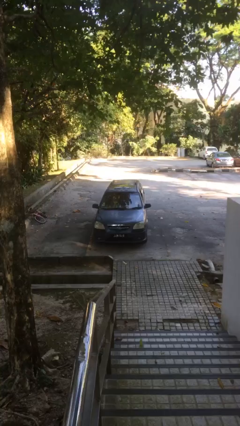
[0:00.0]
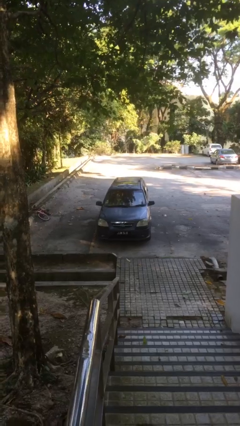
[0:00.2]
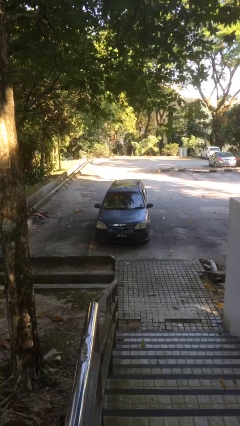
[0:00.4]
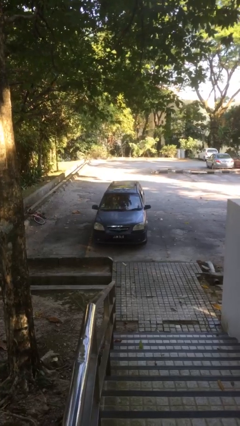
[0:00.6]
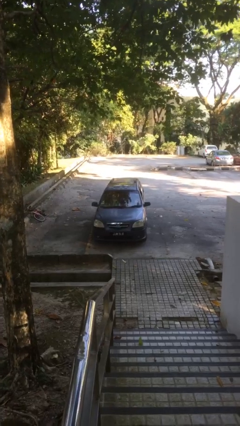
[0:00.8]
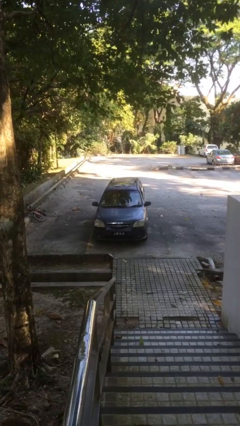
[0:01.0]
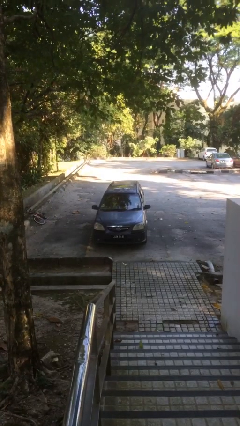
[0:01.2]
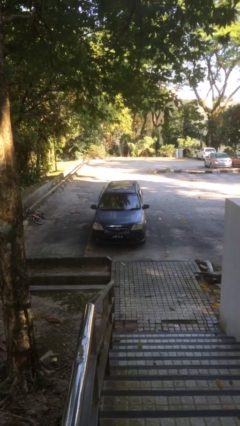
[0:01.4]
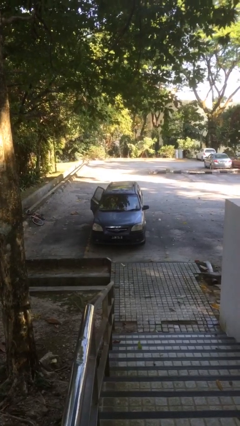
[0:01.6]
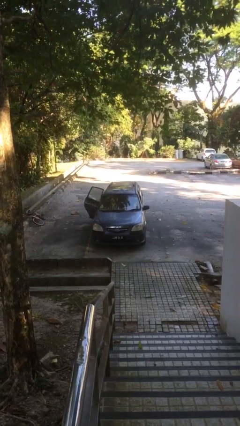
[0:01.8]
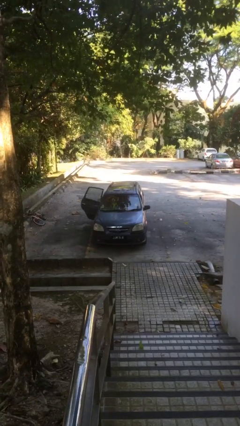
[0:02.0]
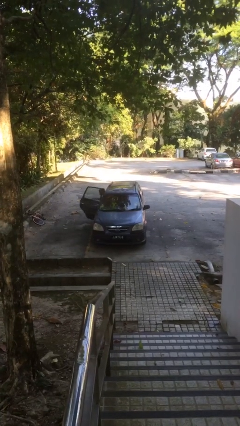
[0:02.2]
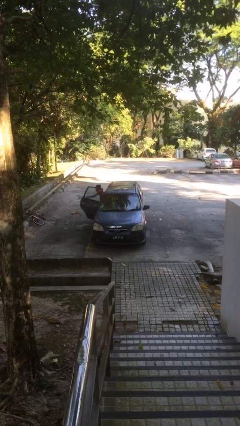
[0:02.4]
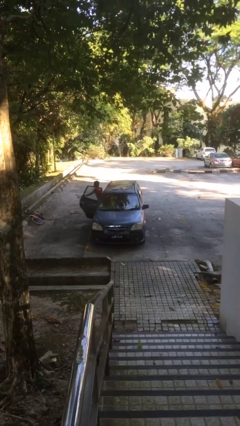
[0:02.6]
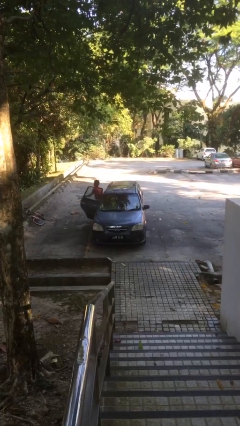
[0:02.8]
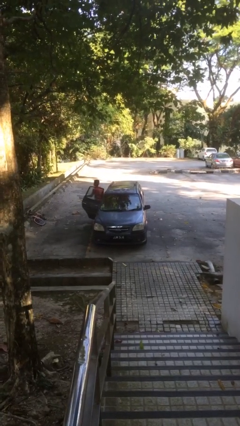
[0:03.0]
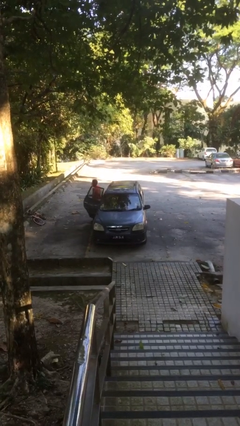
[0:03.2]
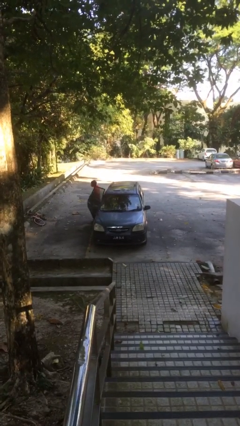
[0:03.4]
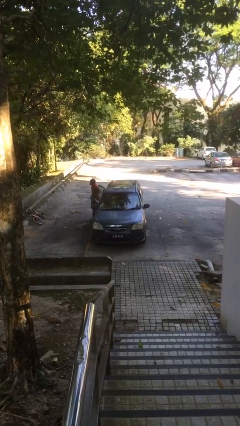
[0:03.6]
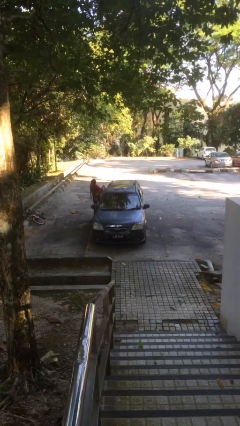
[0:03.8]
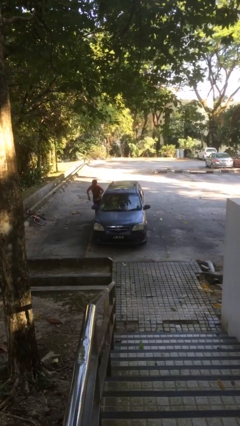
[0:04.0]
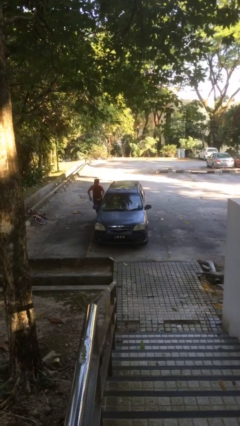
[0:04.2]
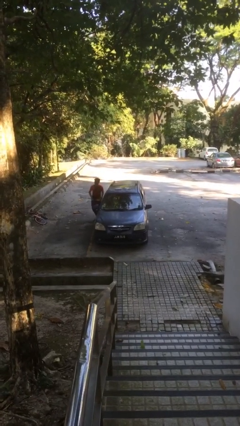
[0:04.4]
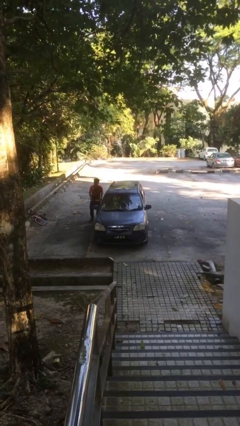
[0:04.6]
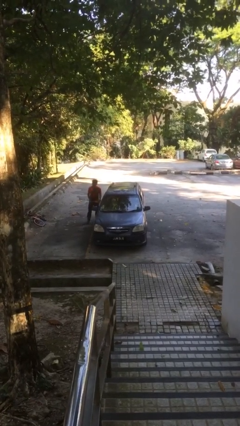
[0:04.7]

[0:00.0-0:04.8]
car drops off person

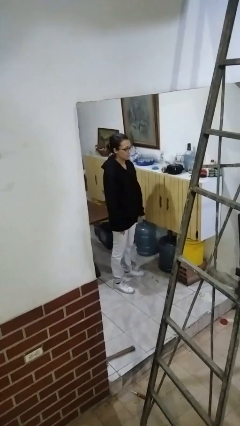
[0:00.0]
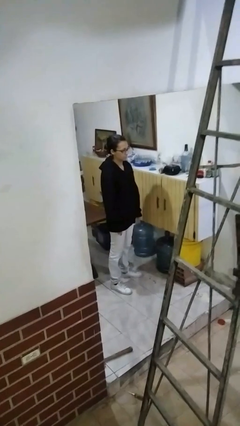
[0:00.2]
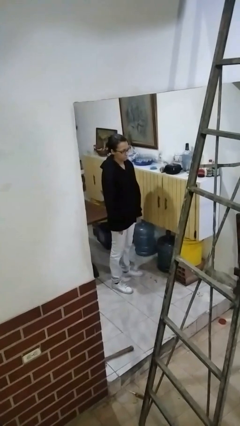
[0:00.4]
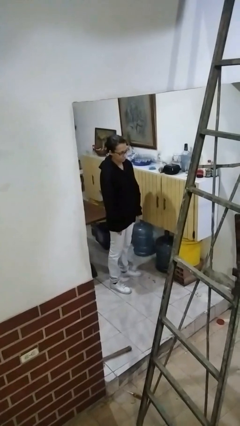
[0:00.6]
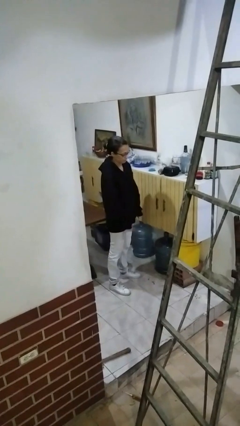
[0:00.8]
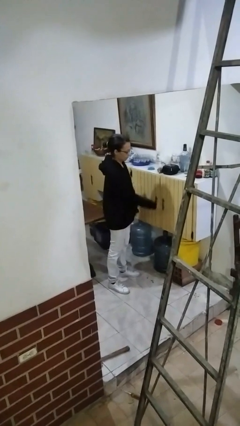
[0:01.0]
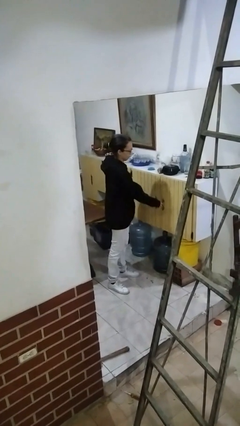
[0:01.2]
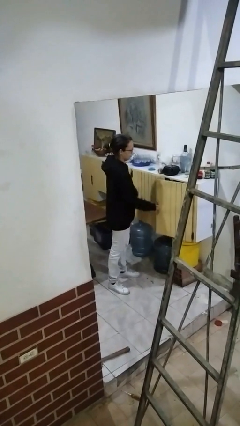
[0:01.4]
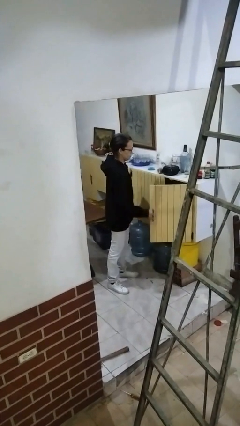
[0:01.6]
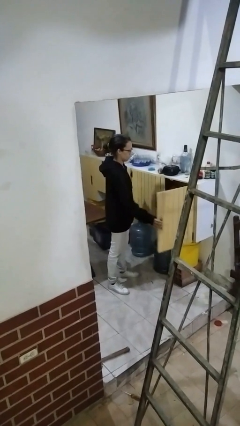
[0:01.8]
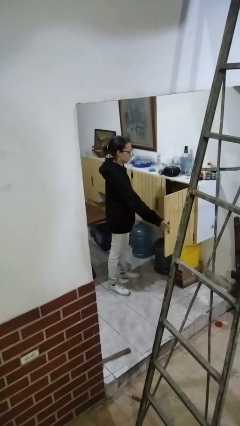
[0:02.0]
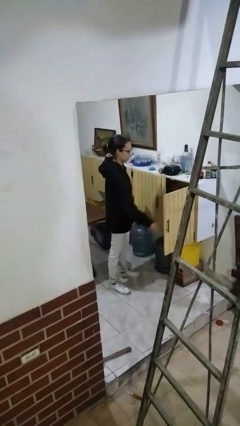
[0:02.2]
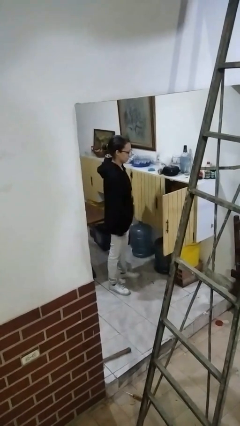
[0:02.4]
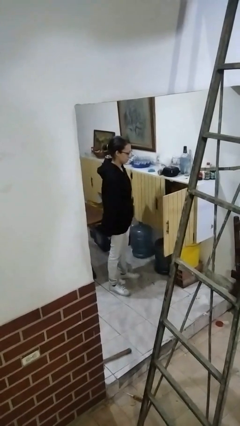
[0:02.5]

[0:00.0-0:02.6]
person opens cabinet

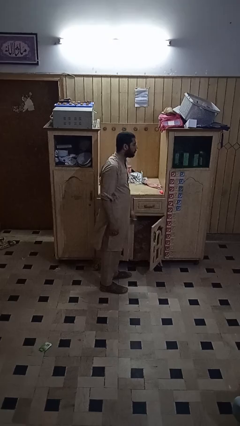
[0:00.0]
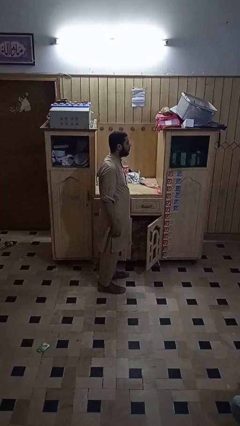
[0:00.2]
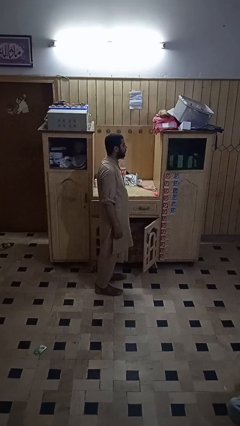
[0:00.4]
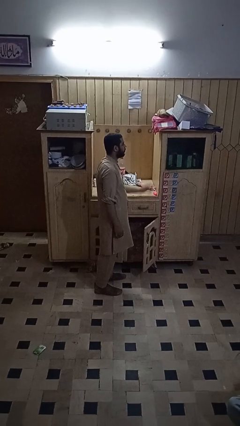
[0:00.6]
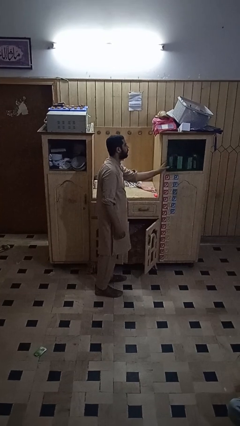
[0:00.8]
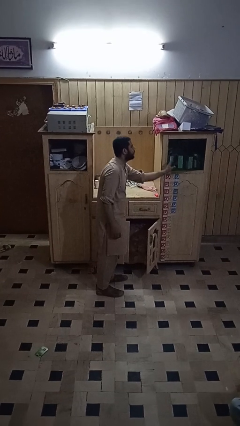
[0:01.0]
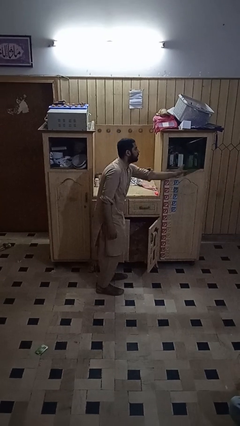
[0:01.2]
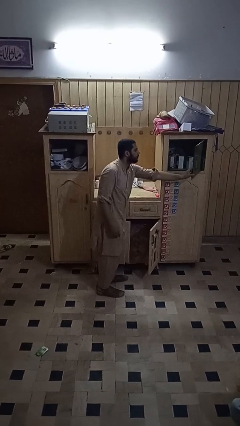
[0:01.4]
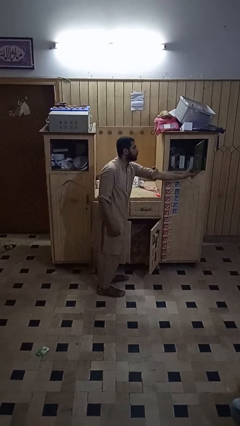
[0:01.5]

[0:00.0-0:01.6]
person closes cabinet

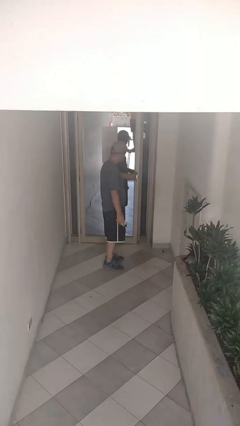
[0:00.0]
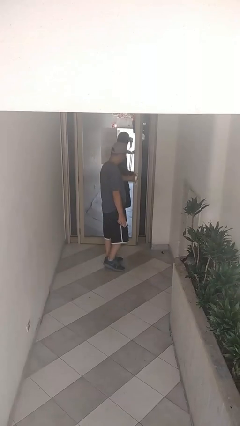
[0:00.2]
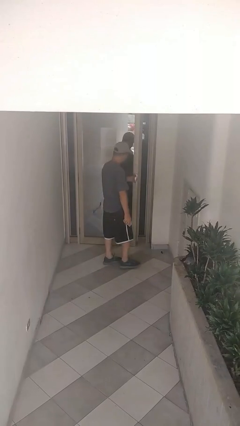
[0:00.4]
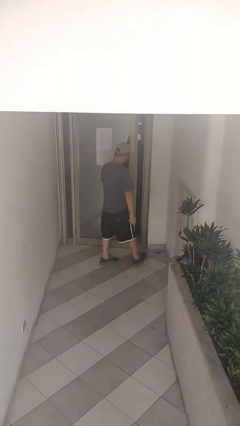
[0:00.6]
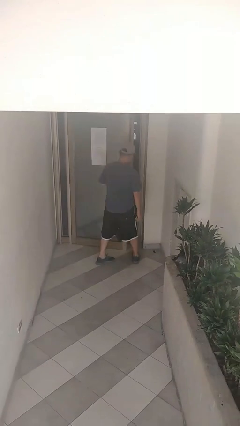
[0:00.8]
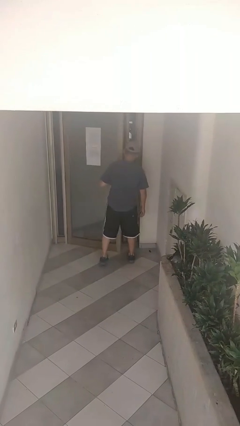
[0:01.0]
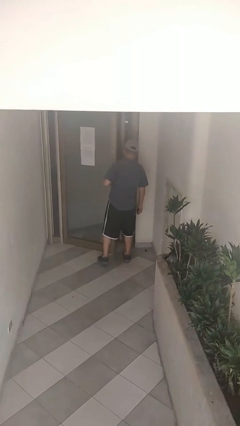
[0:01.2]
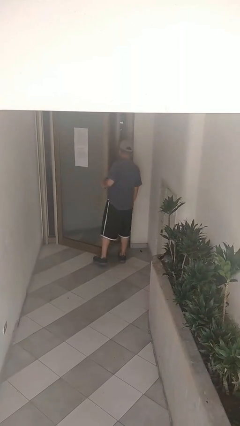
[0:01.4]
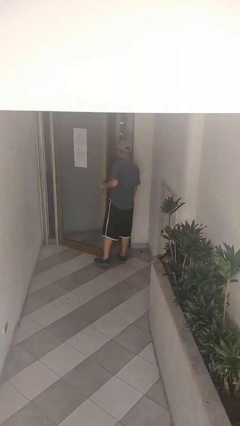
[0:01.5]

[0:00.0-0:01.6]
person opens facility door

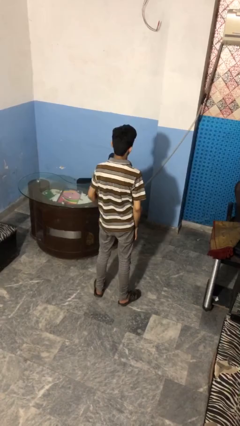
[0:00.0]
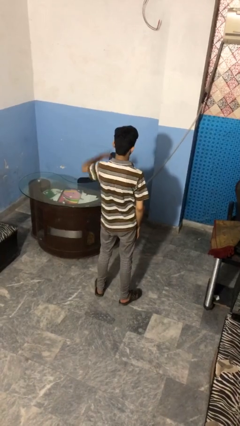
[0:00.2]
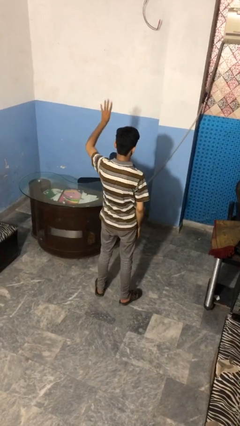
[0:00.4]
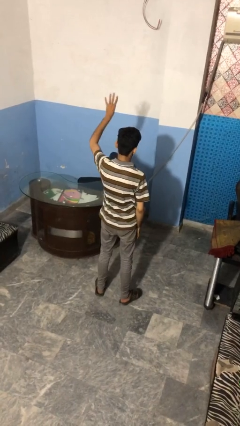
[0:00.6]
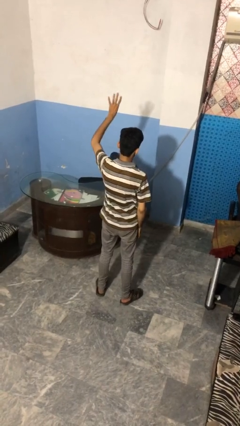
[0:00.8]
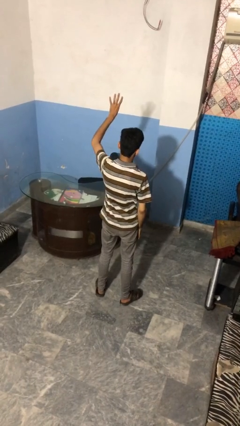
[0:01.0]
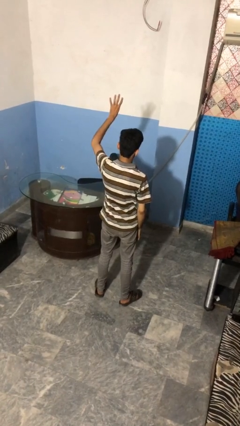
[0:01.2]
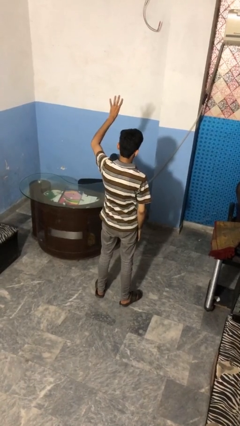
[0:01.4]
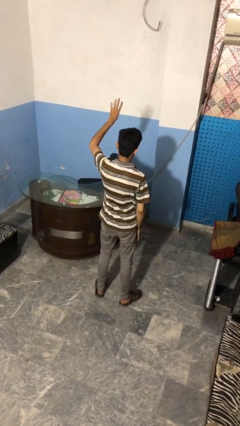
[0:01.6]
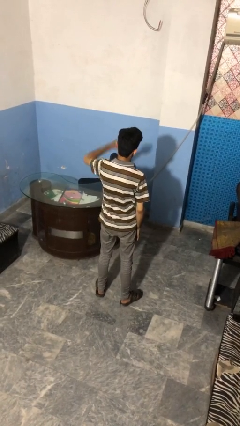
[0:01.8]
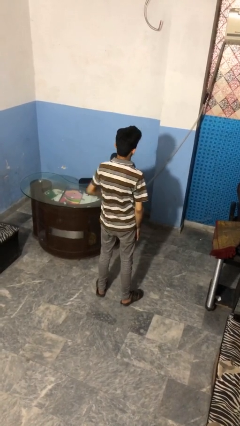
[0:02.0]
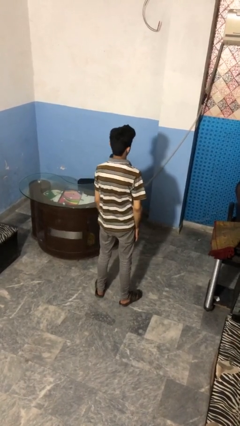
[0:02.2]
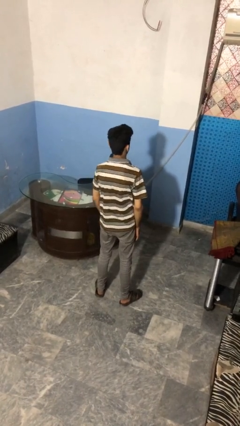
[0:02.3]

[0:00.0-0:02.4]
person gestures number four

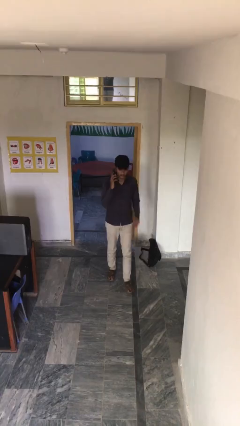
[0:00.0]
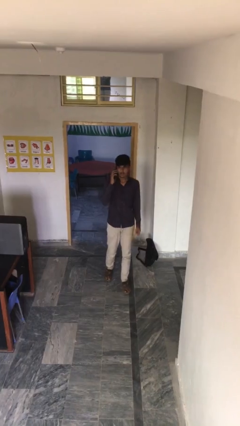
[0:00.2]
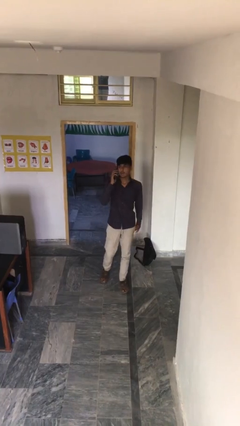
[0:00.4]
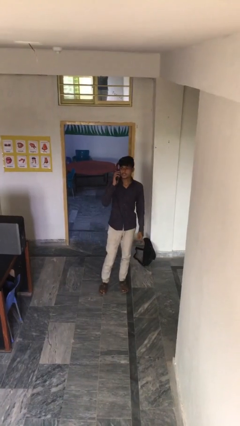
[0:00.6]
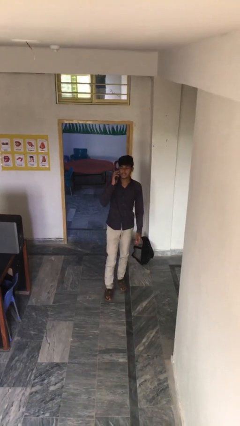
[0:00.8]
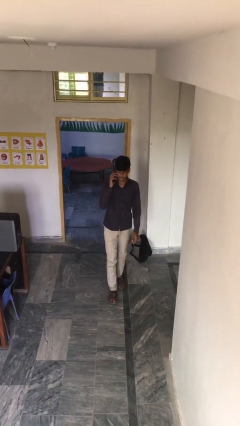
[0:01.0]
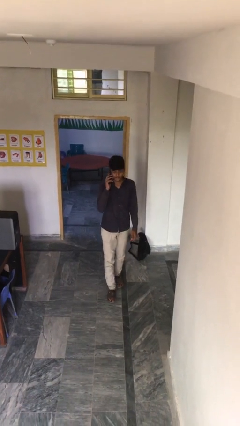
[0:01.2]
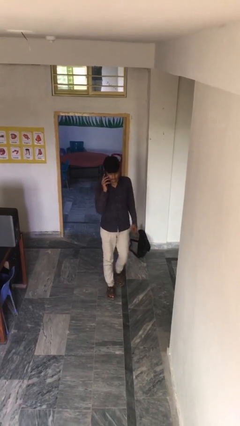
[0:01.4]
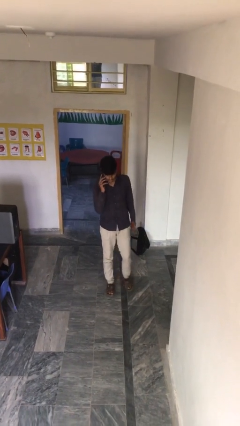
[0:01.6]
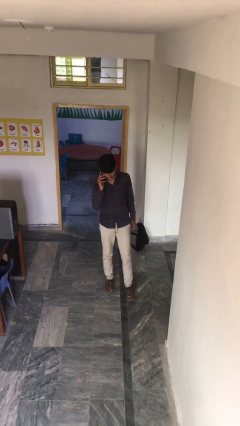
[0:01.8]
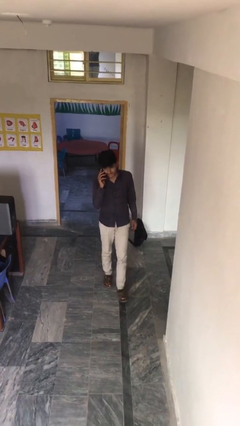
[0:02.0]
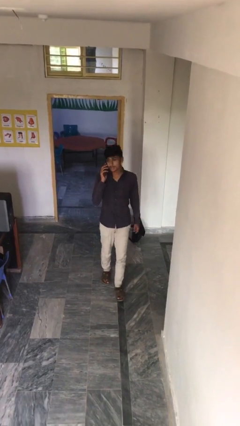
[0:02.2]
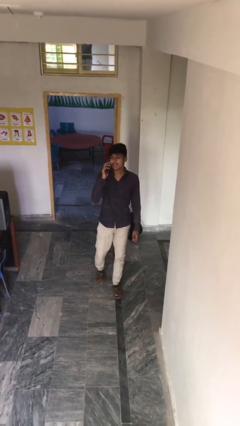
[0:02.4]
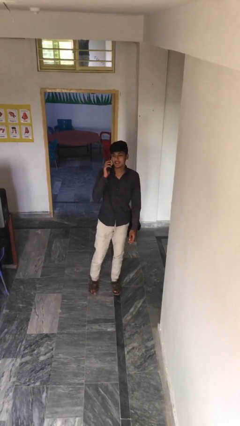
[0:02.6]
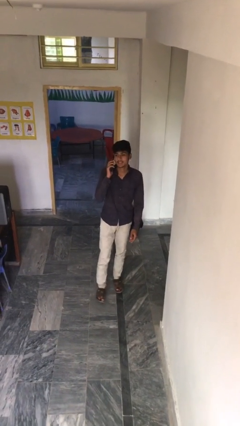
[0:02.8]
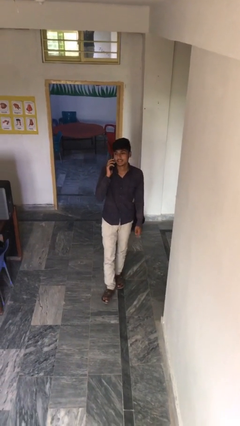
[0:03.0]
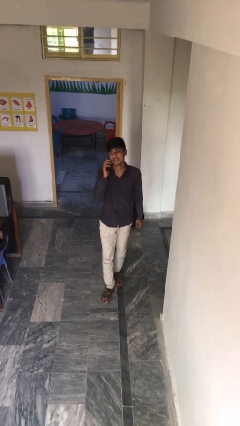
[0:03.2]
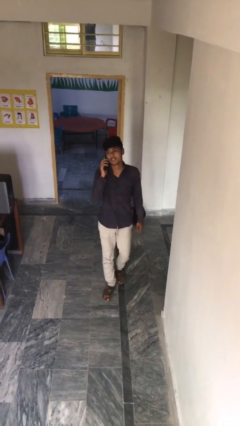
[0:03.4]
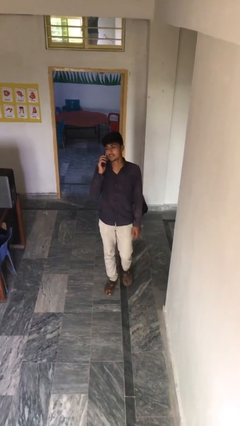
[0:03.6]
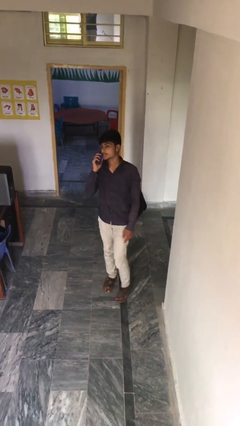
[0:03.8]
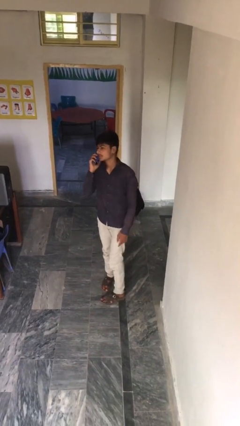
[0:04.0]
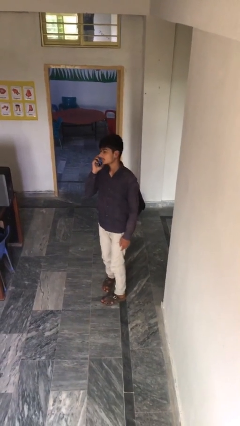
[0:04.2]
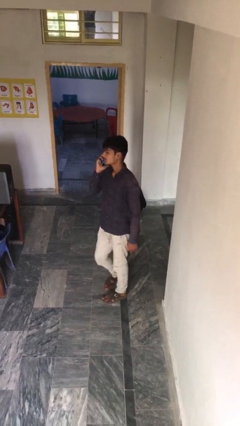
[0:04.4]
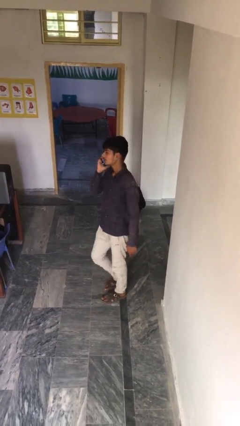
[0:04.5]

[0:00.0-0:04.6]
person talks on phone
